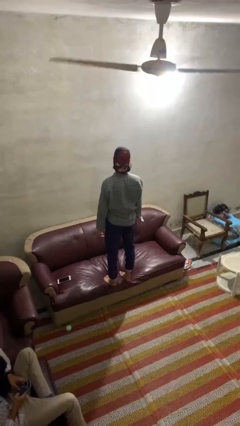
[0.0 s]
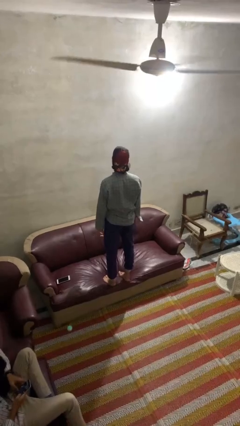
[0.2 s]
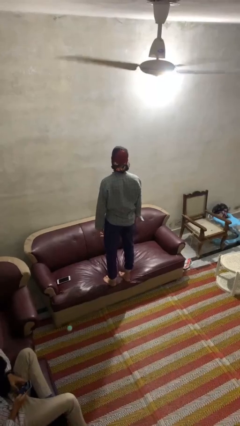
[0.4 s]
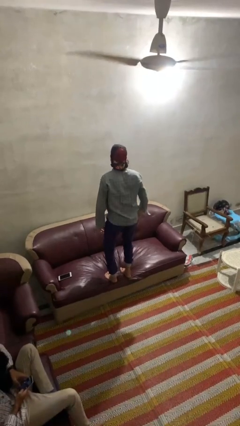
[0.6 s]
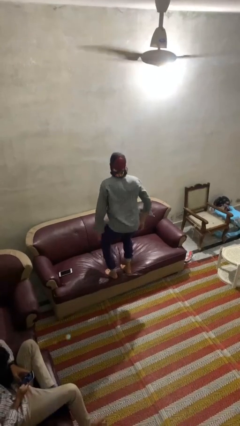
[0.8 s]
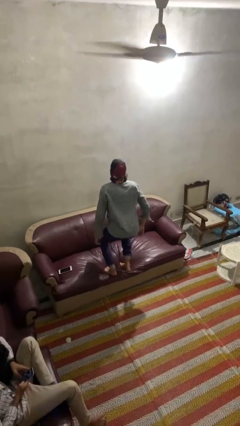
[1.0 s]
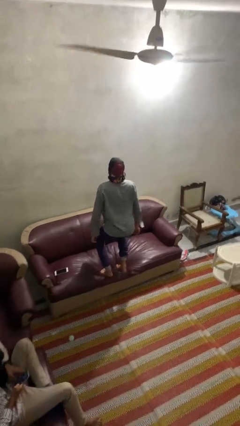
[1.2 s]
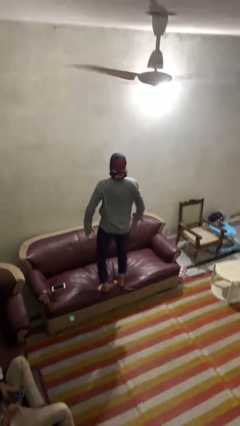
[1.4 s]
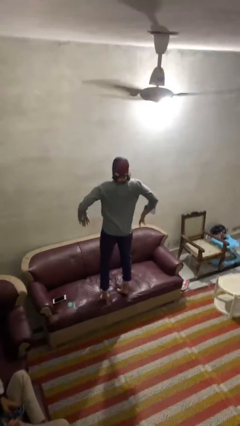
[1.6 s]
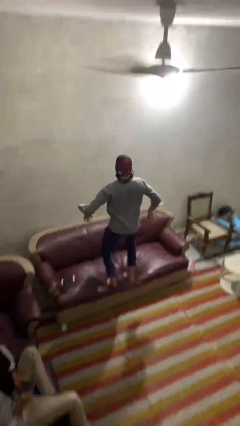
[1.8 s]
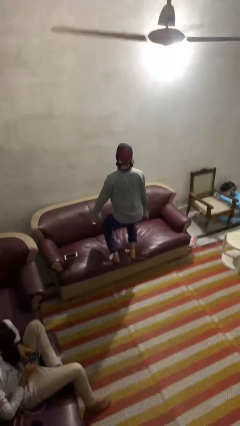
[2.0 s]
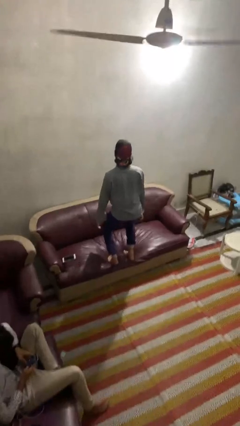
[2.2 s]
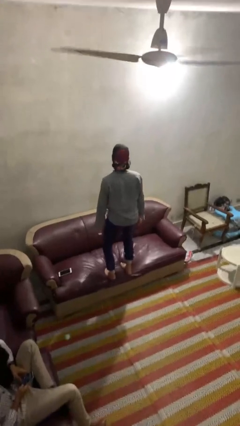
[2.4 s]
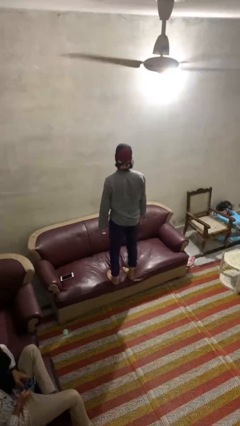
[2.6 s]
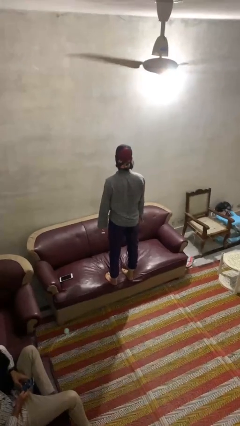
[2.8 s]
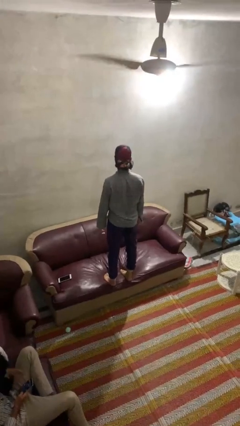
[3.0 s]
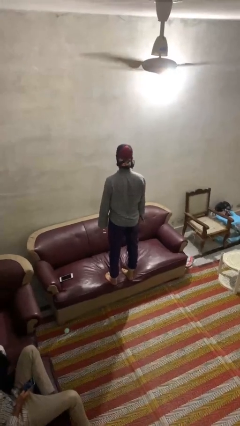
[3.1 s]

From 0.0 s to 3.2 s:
person jumps on couch

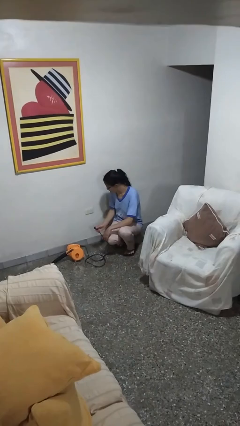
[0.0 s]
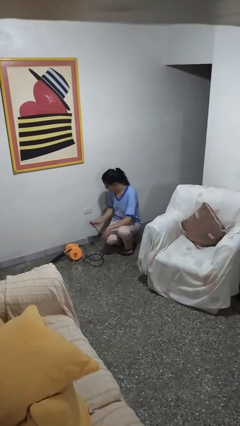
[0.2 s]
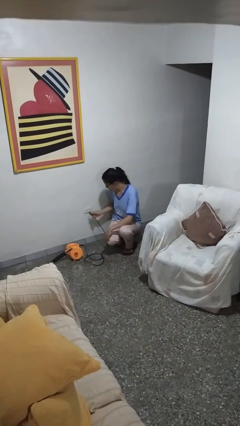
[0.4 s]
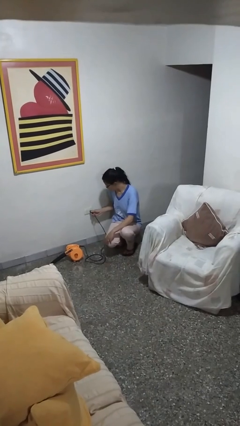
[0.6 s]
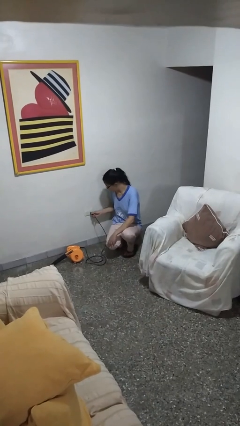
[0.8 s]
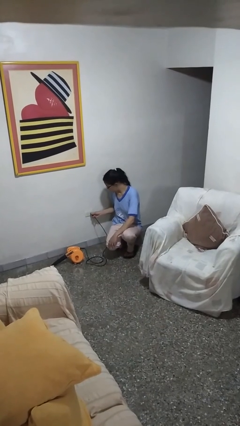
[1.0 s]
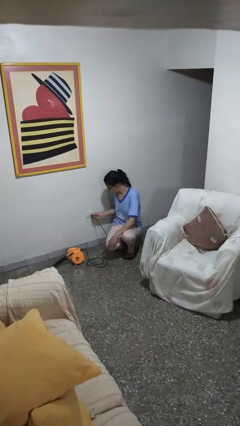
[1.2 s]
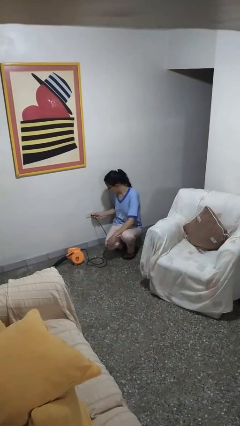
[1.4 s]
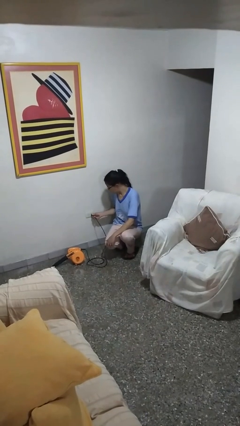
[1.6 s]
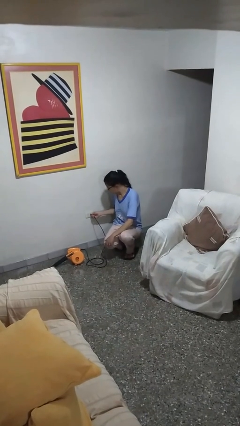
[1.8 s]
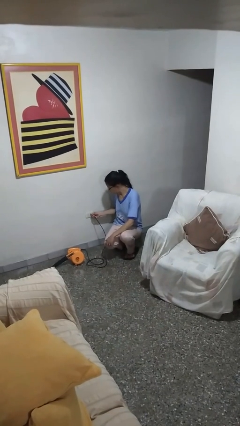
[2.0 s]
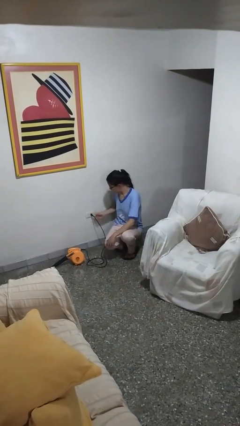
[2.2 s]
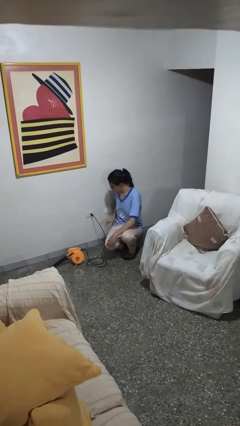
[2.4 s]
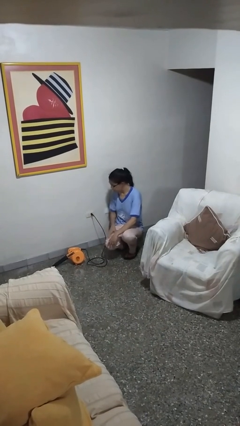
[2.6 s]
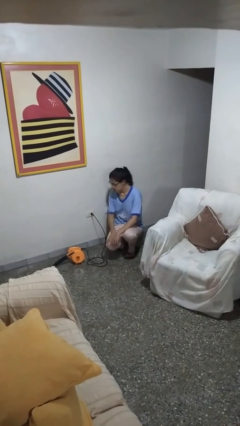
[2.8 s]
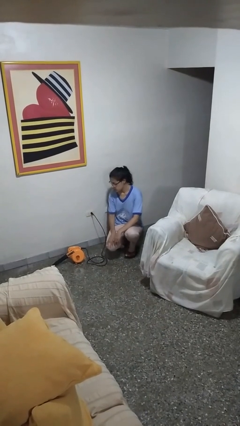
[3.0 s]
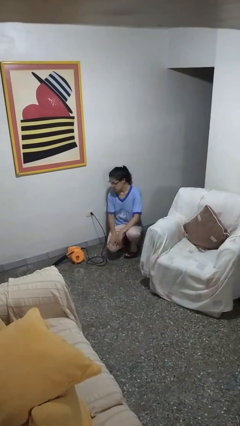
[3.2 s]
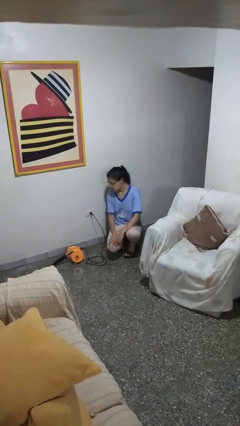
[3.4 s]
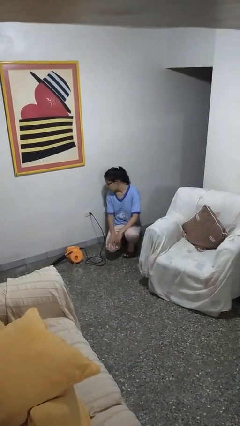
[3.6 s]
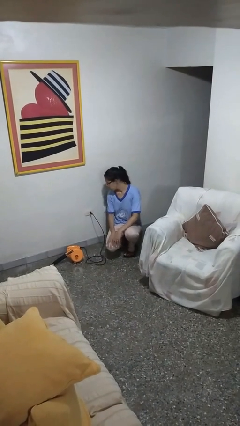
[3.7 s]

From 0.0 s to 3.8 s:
person plugs into electrical socket

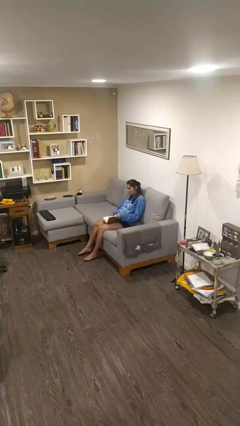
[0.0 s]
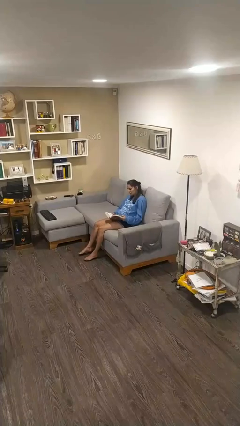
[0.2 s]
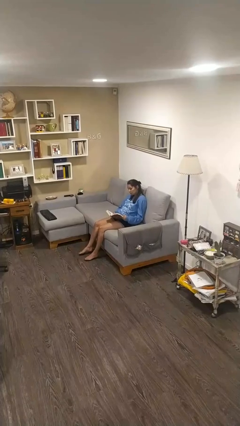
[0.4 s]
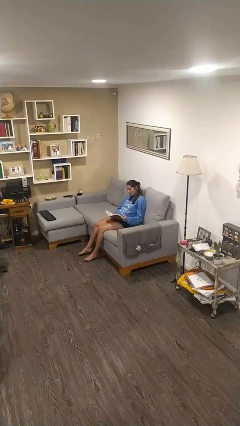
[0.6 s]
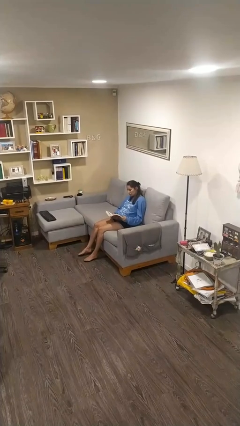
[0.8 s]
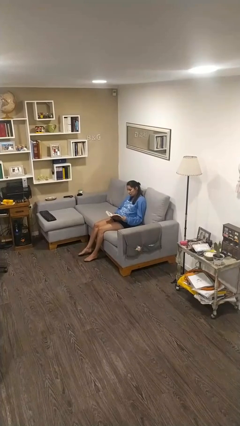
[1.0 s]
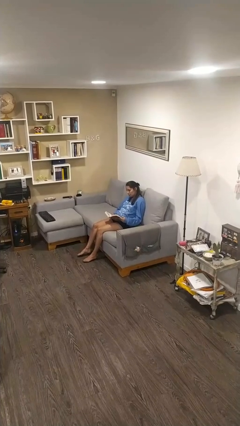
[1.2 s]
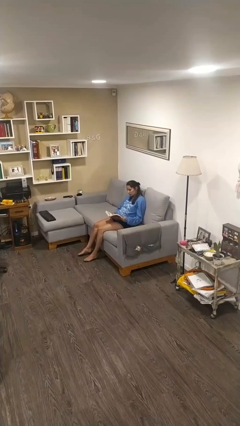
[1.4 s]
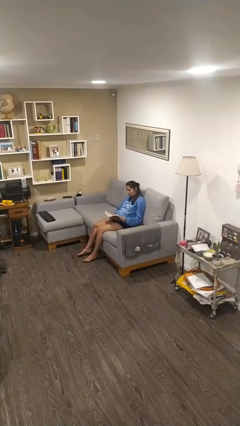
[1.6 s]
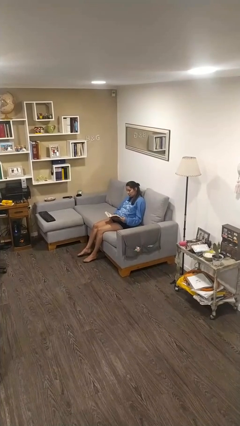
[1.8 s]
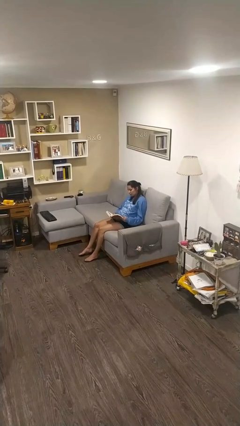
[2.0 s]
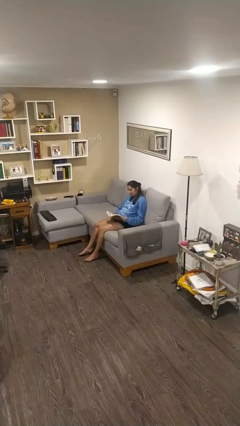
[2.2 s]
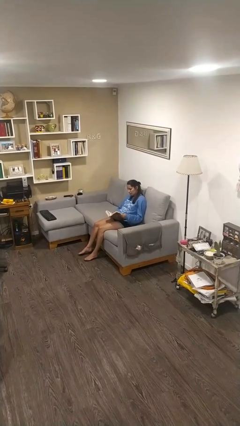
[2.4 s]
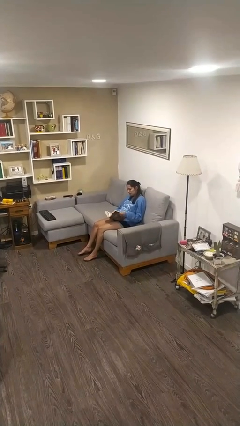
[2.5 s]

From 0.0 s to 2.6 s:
person reads document

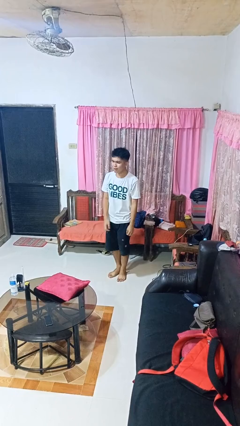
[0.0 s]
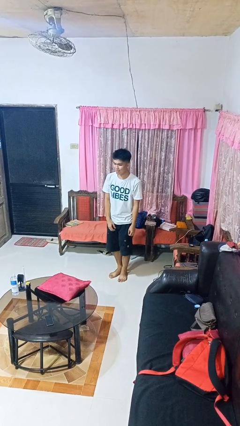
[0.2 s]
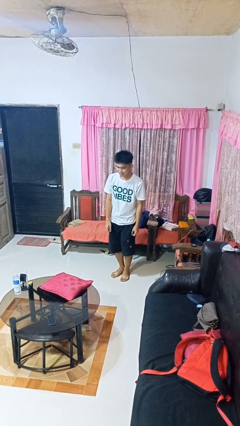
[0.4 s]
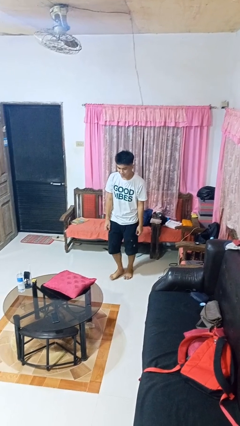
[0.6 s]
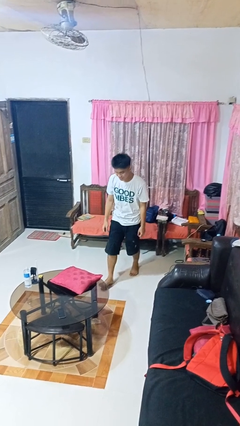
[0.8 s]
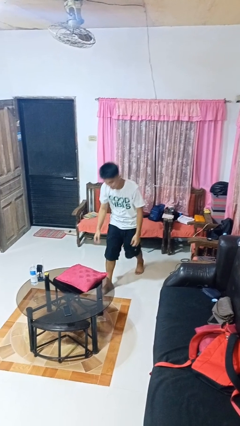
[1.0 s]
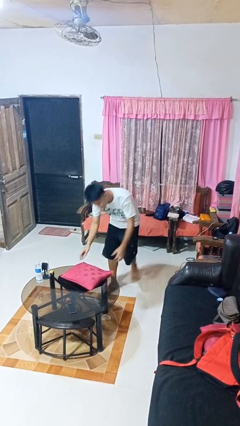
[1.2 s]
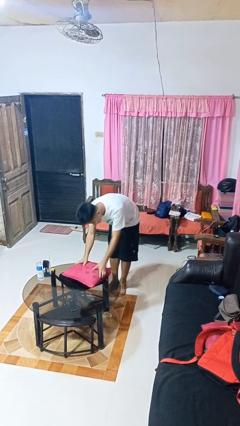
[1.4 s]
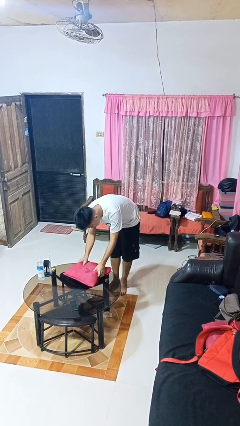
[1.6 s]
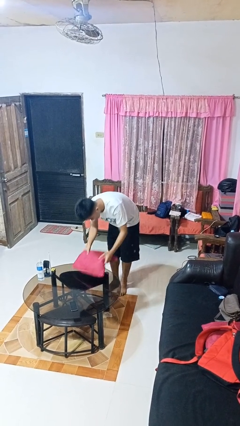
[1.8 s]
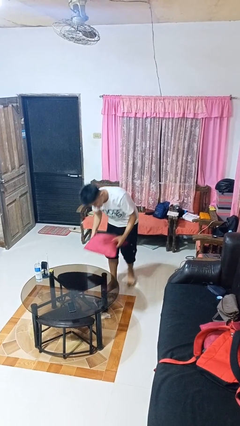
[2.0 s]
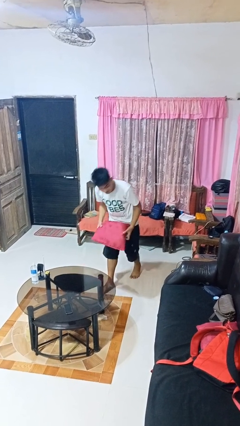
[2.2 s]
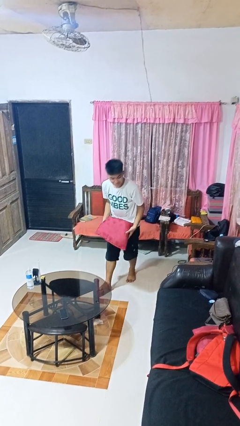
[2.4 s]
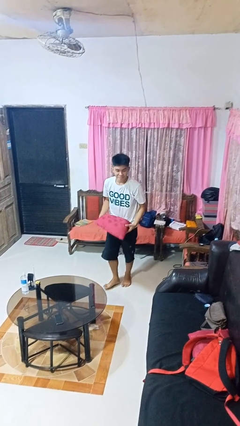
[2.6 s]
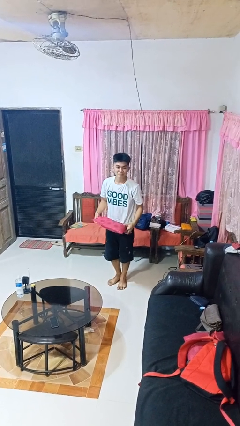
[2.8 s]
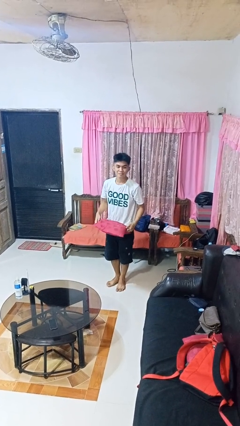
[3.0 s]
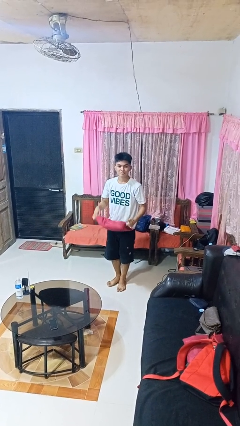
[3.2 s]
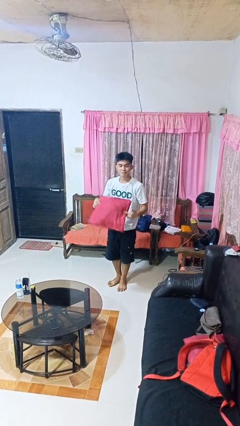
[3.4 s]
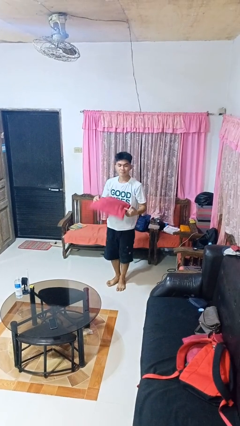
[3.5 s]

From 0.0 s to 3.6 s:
person picks up object from table

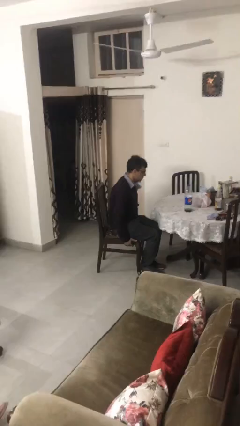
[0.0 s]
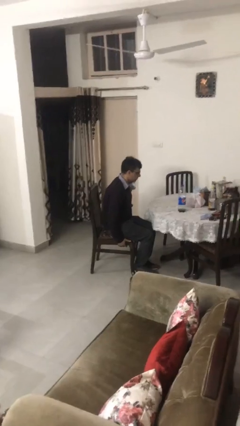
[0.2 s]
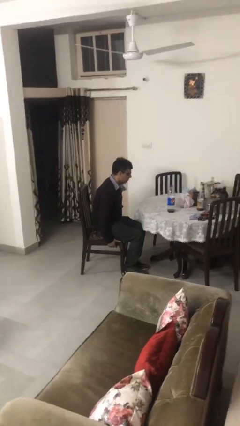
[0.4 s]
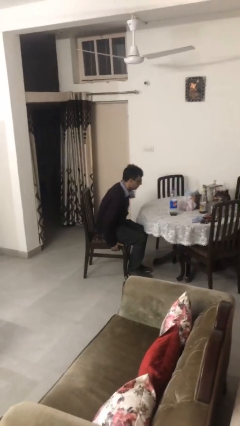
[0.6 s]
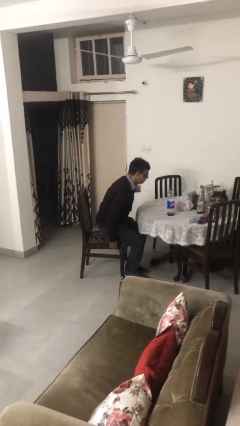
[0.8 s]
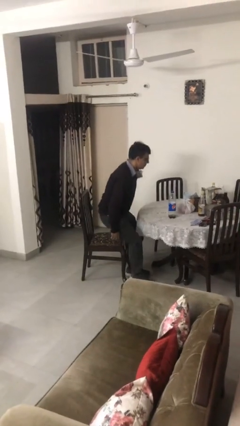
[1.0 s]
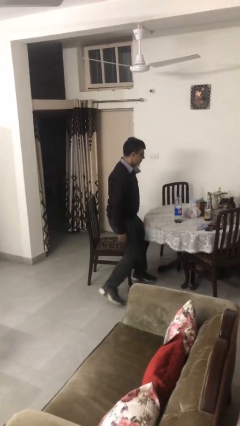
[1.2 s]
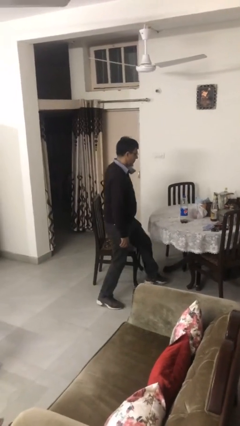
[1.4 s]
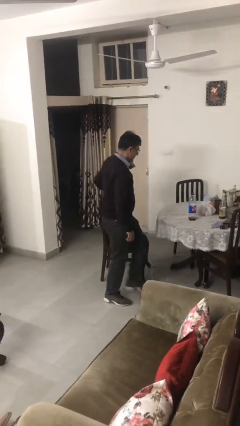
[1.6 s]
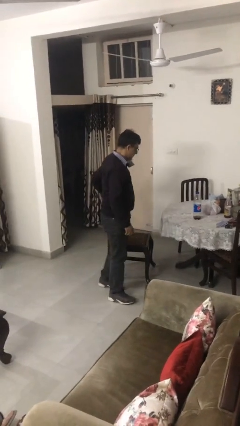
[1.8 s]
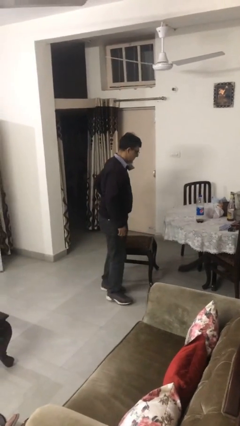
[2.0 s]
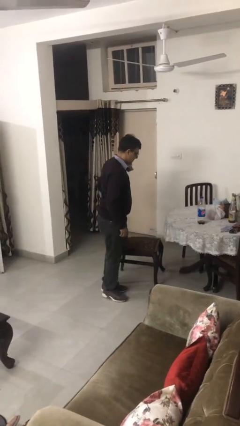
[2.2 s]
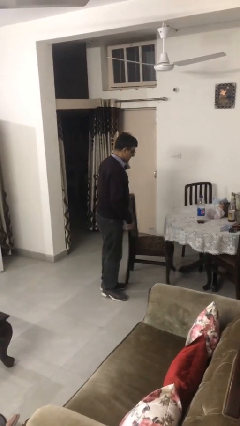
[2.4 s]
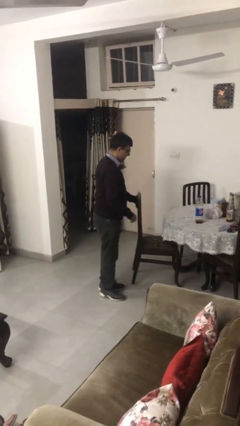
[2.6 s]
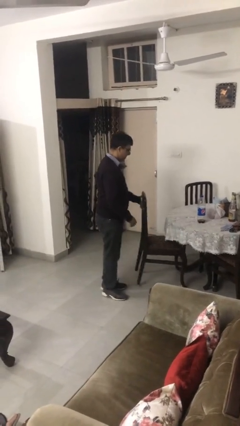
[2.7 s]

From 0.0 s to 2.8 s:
person stands up

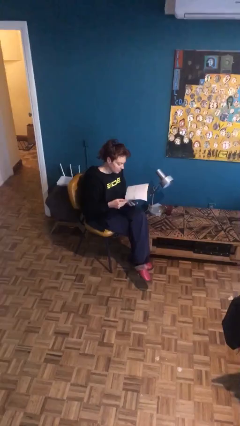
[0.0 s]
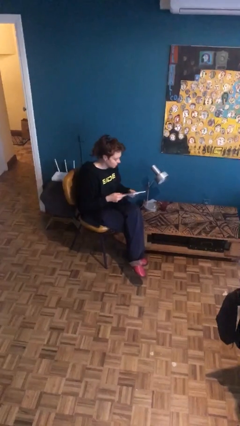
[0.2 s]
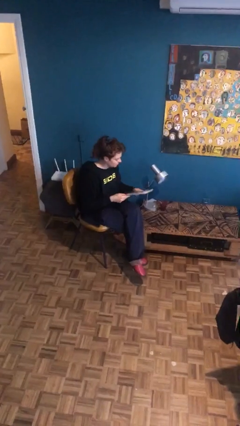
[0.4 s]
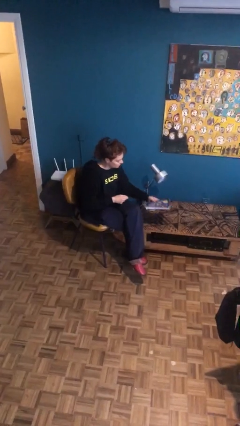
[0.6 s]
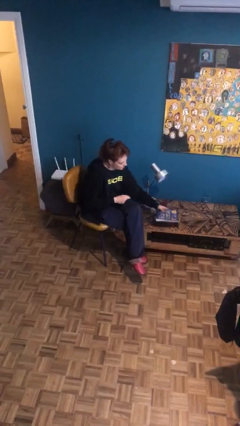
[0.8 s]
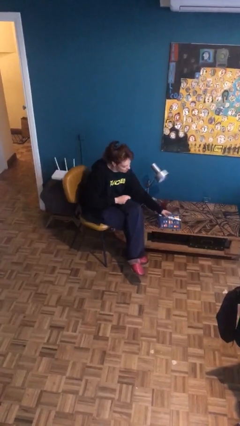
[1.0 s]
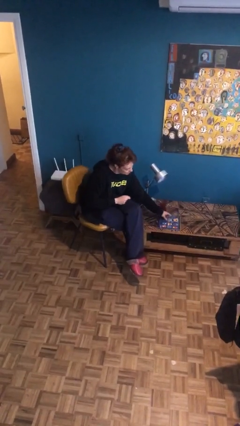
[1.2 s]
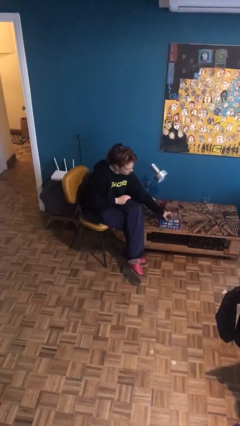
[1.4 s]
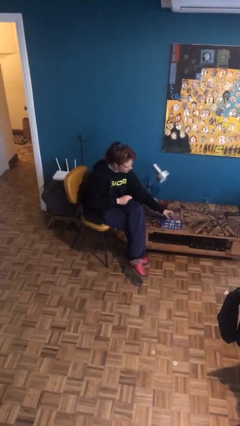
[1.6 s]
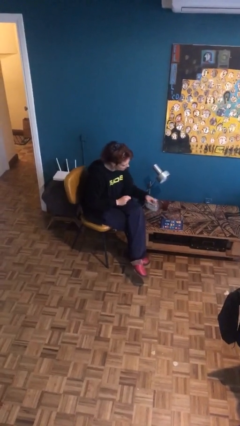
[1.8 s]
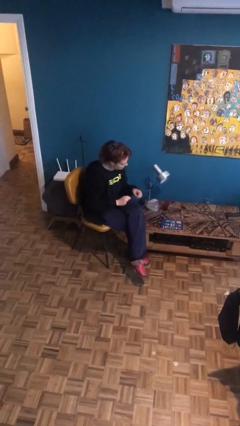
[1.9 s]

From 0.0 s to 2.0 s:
person puts down object on table
